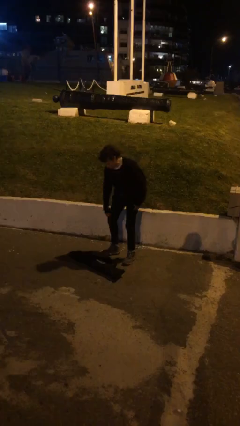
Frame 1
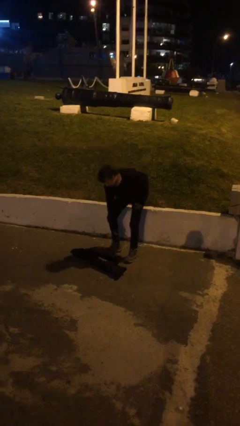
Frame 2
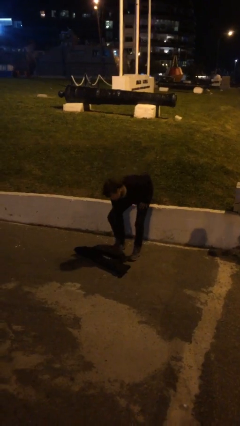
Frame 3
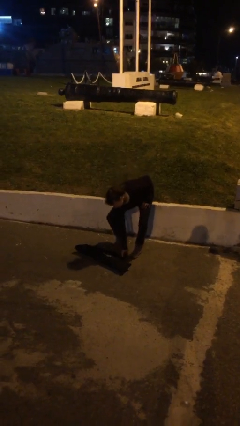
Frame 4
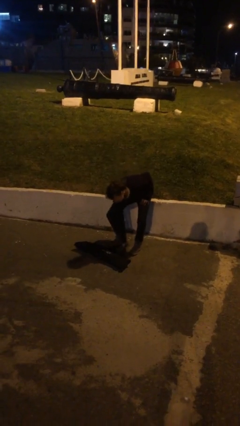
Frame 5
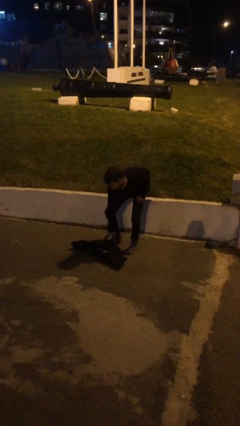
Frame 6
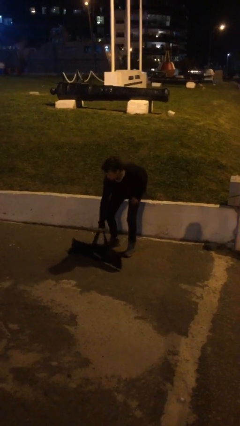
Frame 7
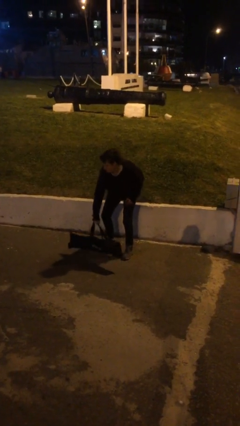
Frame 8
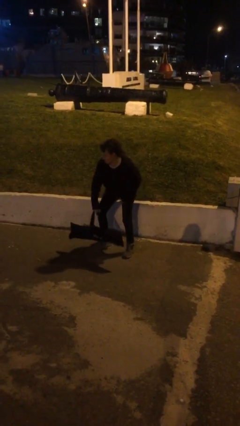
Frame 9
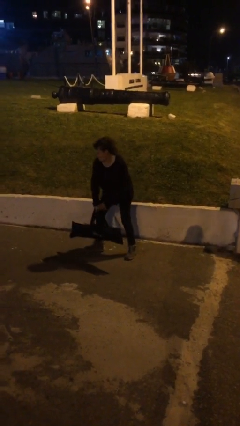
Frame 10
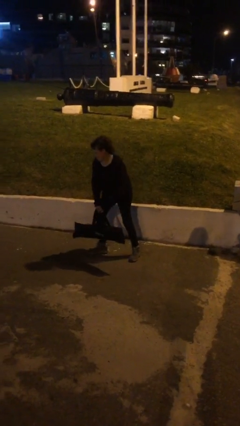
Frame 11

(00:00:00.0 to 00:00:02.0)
person picks up object from floor

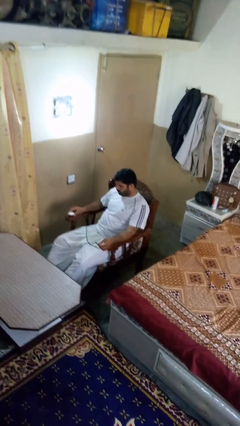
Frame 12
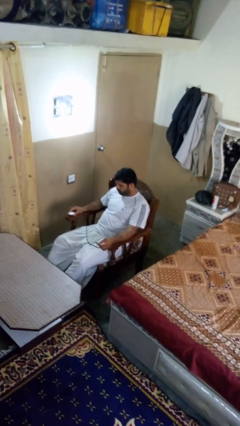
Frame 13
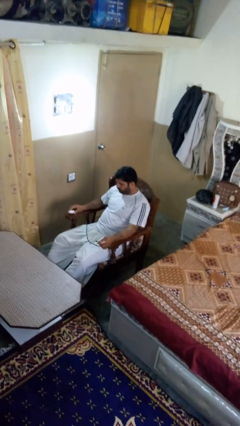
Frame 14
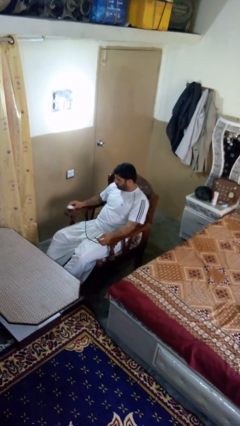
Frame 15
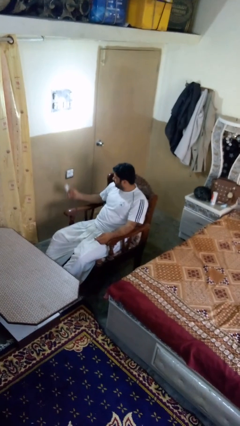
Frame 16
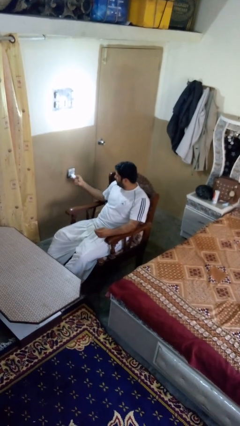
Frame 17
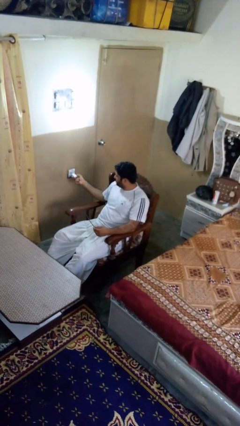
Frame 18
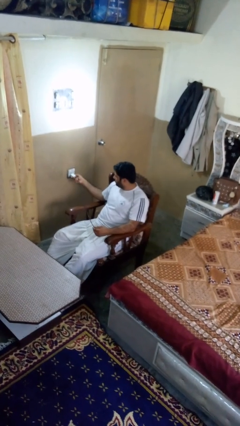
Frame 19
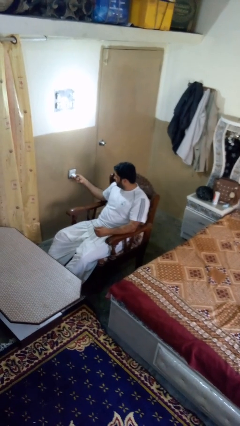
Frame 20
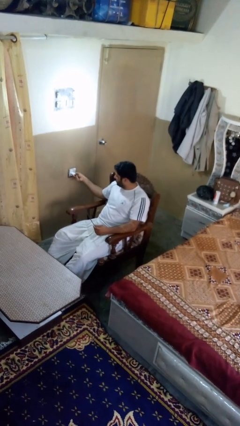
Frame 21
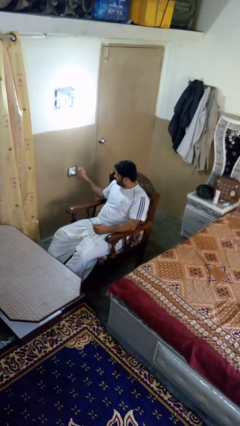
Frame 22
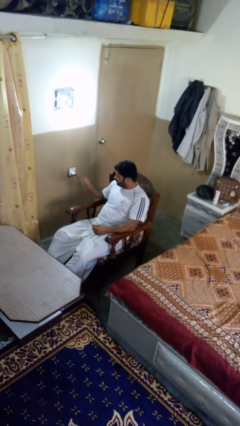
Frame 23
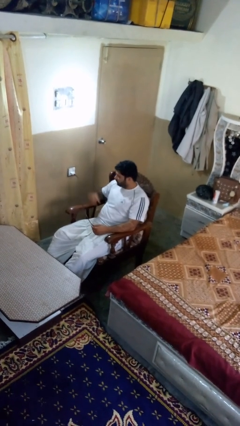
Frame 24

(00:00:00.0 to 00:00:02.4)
person plugs into electrical socket

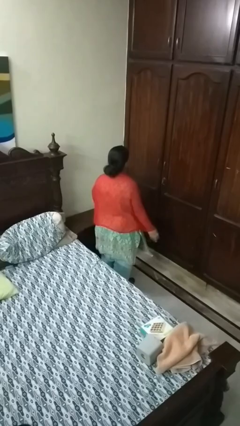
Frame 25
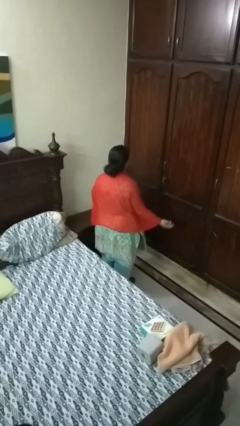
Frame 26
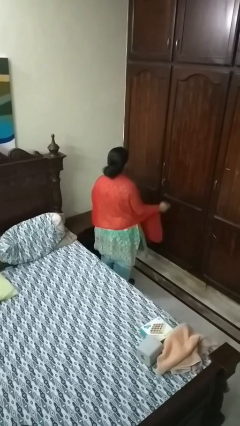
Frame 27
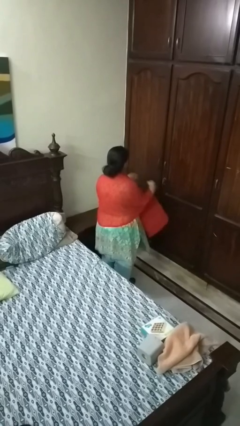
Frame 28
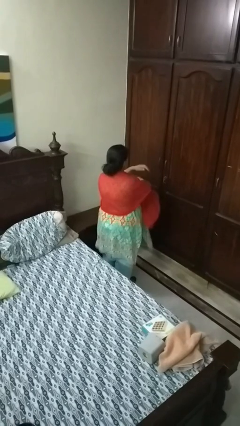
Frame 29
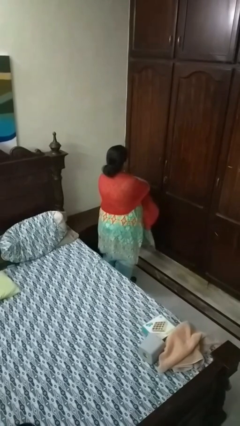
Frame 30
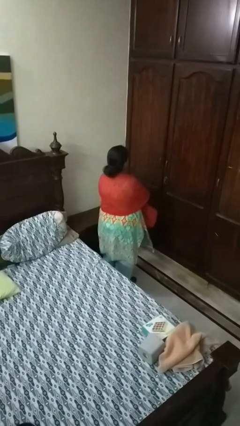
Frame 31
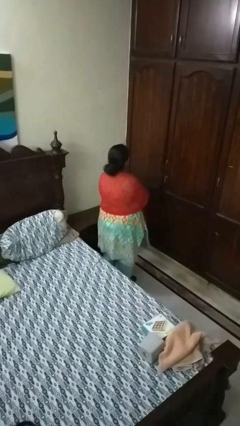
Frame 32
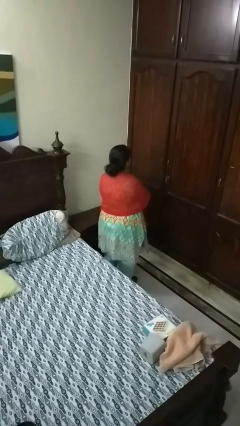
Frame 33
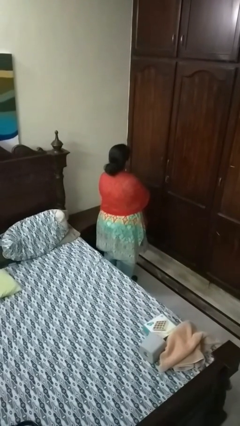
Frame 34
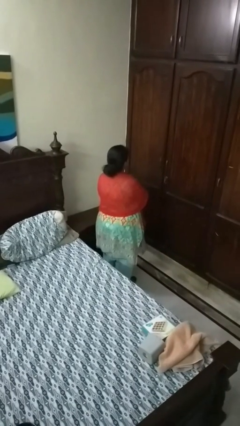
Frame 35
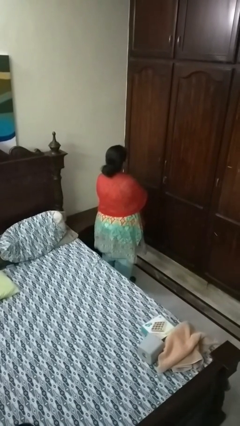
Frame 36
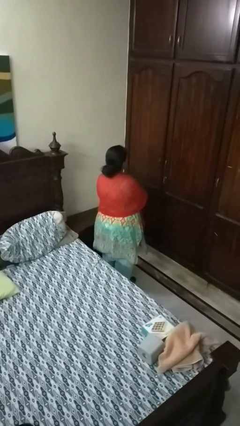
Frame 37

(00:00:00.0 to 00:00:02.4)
person crosses arms

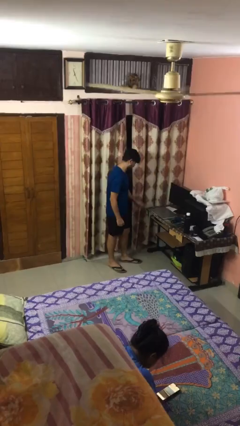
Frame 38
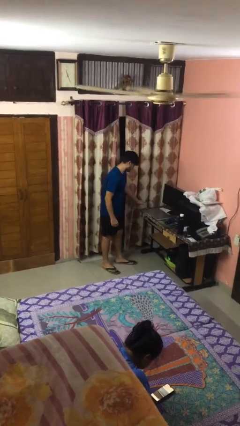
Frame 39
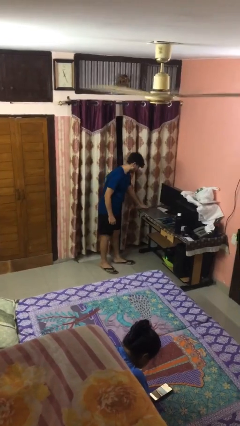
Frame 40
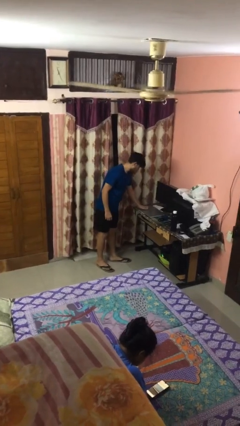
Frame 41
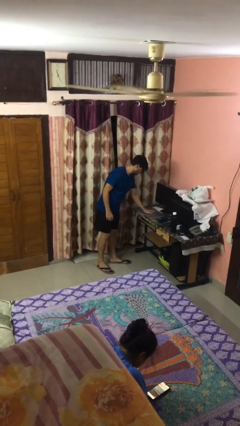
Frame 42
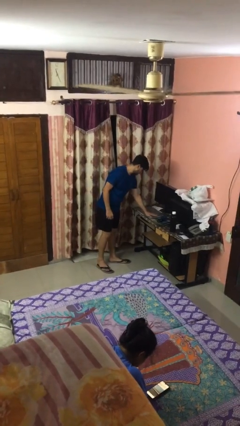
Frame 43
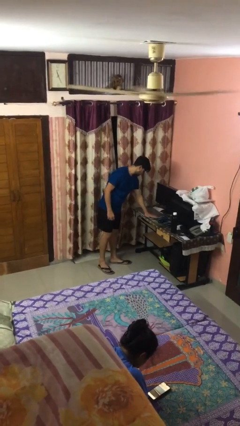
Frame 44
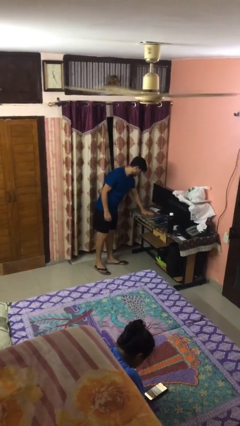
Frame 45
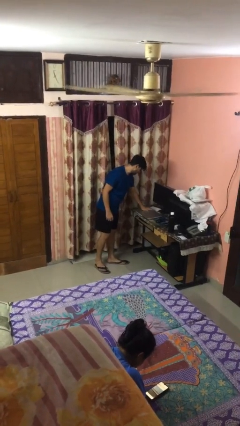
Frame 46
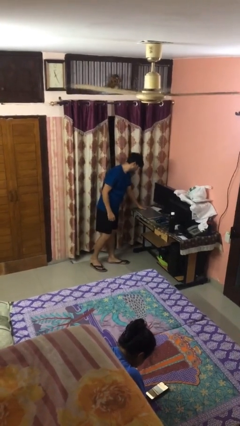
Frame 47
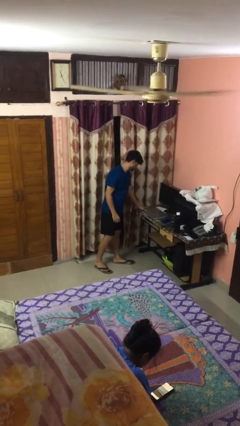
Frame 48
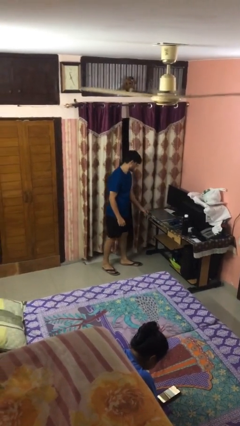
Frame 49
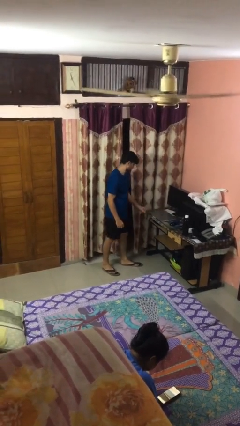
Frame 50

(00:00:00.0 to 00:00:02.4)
person waves hand over object

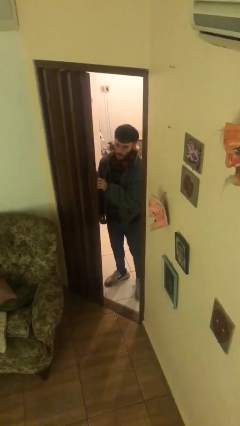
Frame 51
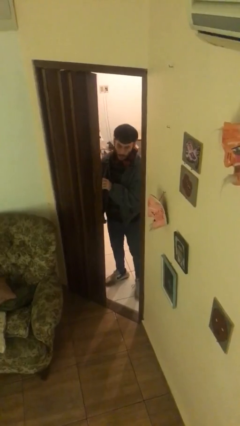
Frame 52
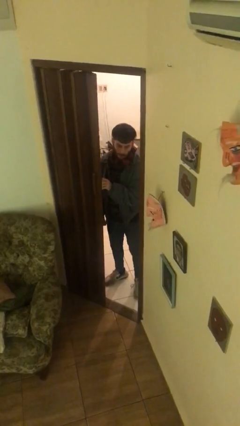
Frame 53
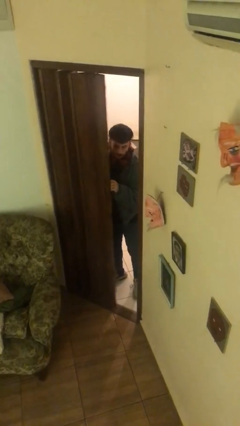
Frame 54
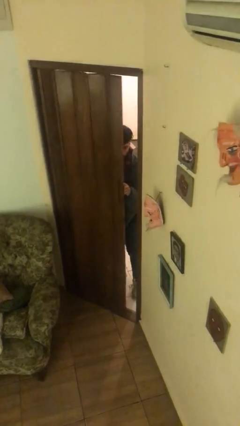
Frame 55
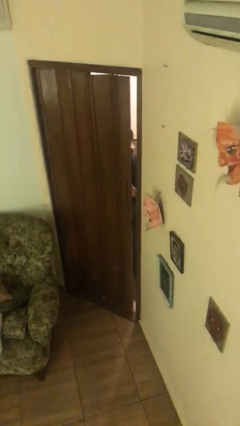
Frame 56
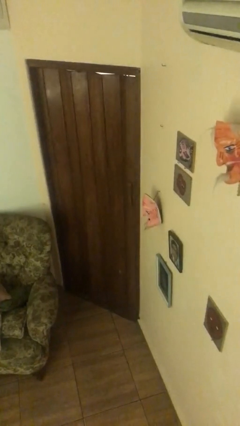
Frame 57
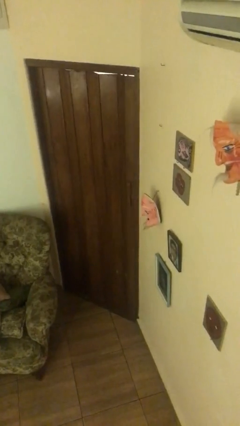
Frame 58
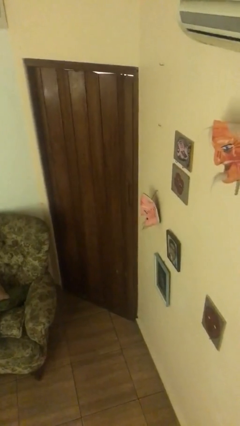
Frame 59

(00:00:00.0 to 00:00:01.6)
person closes sliding door

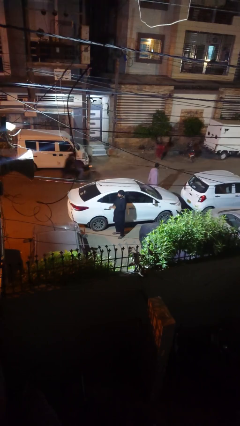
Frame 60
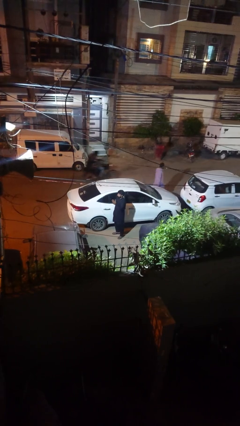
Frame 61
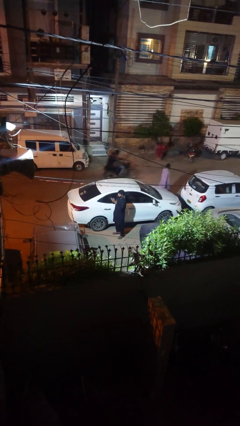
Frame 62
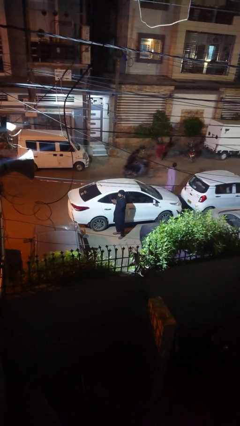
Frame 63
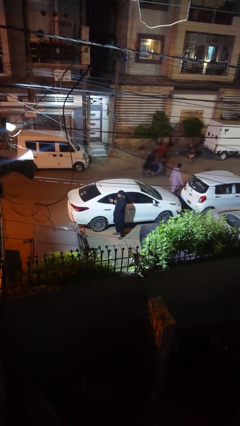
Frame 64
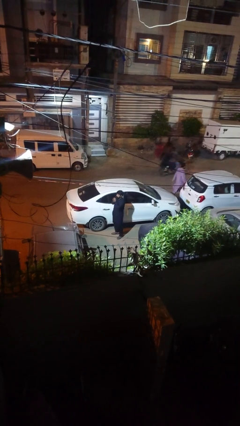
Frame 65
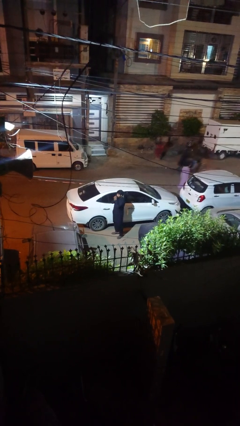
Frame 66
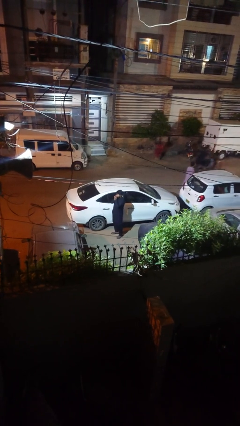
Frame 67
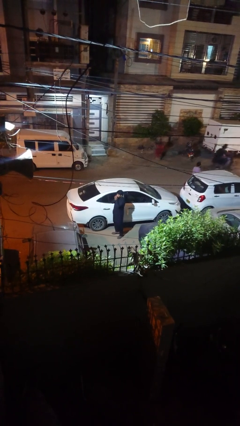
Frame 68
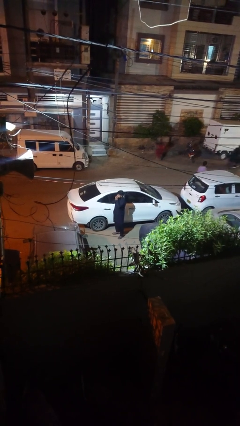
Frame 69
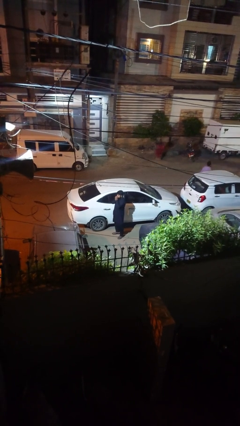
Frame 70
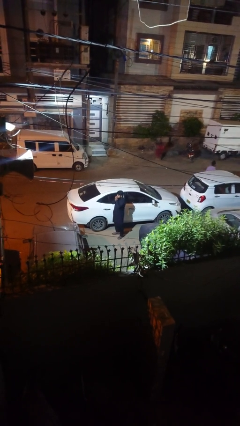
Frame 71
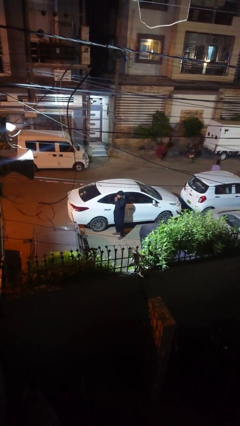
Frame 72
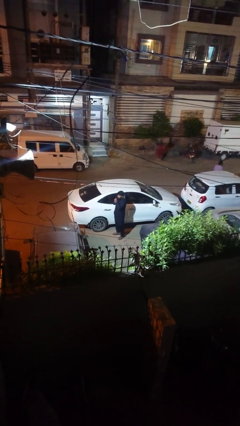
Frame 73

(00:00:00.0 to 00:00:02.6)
person blows into hands

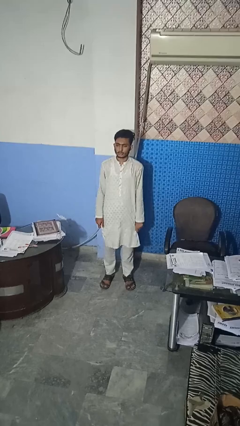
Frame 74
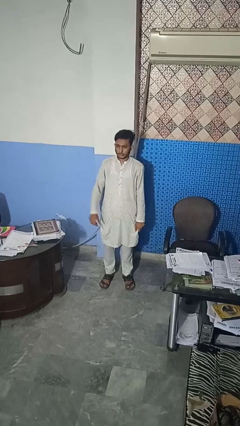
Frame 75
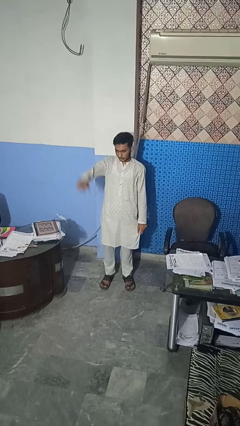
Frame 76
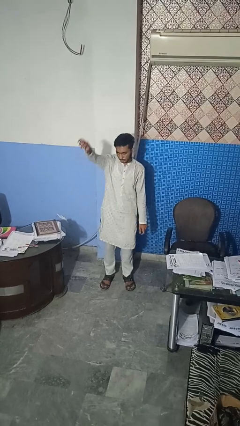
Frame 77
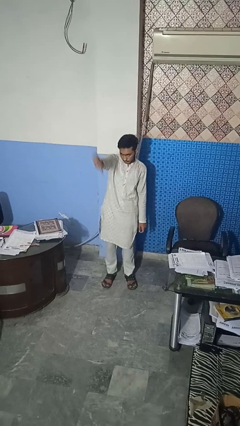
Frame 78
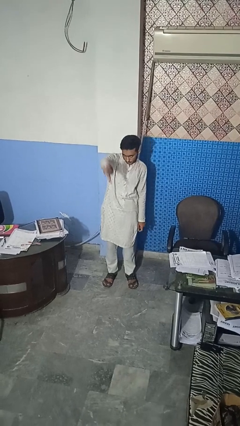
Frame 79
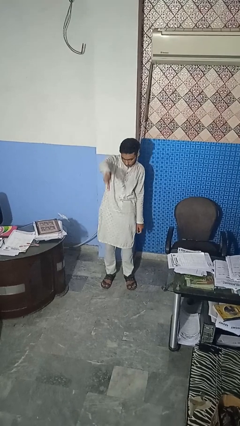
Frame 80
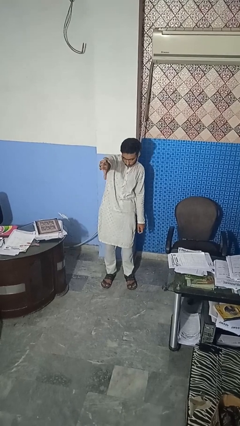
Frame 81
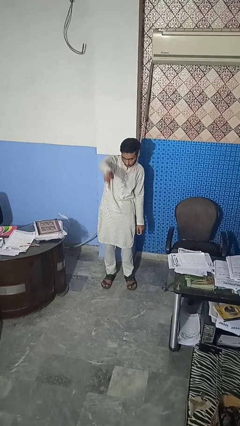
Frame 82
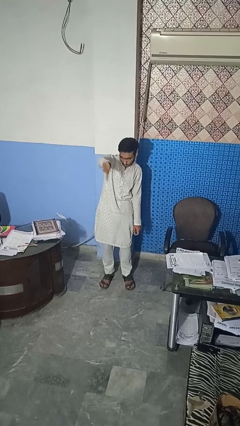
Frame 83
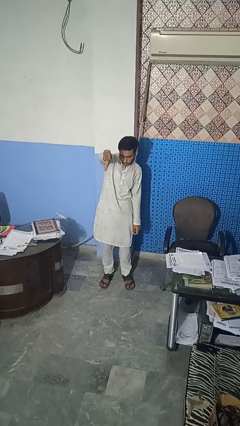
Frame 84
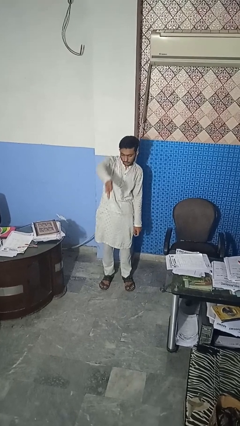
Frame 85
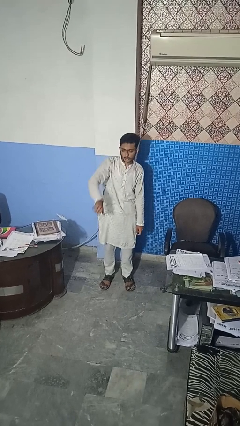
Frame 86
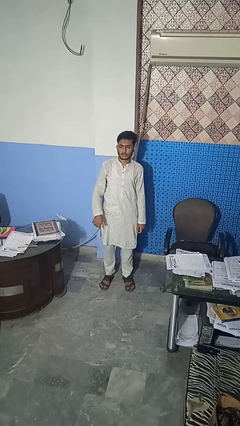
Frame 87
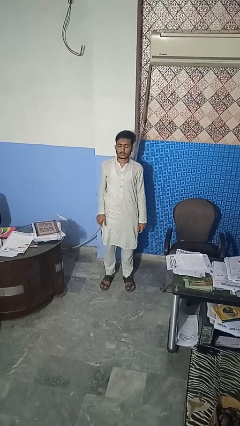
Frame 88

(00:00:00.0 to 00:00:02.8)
person gestures thumbs down

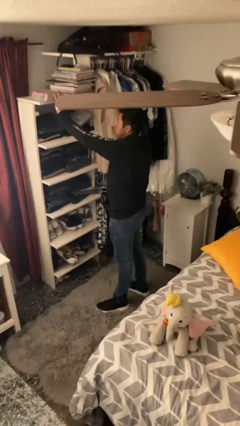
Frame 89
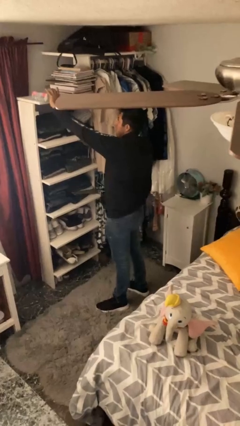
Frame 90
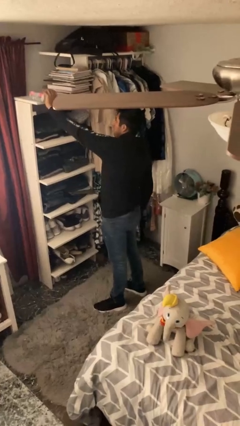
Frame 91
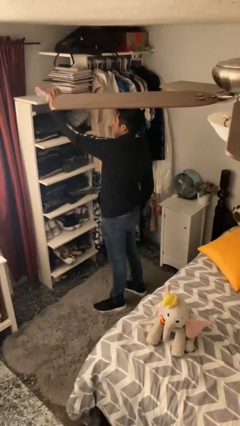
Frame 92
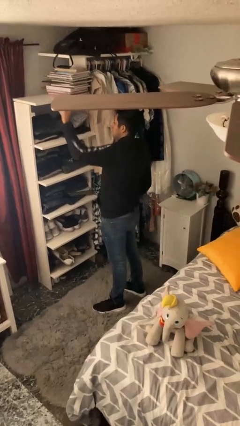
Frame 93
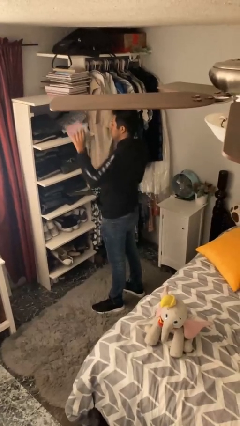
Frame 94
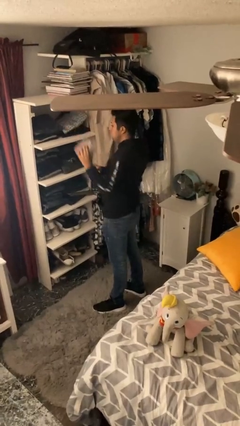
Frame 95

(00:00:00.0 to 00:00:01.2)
person picks up object from shelf
